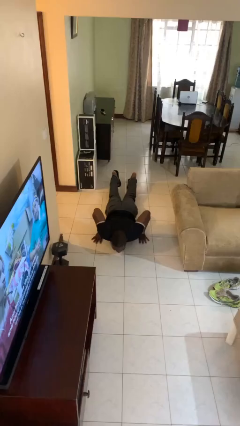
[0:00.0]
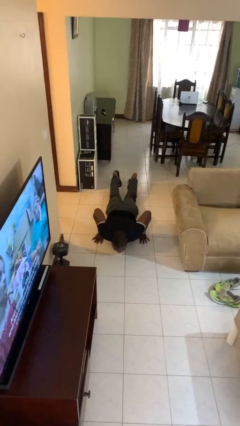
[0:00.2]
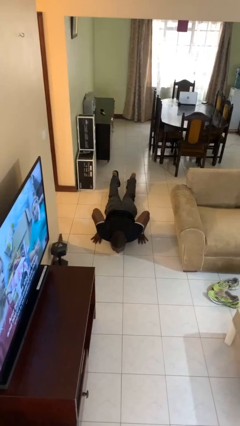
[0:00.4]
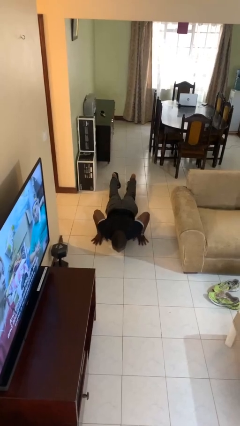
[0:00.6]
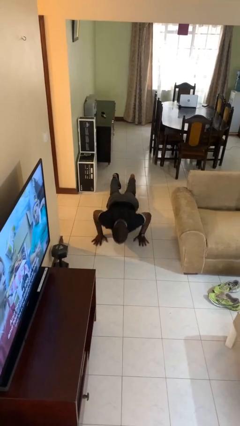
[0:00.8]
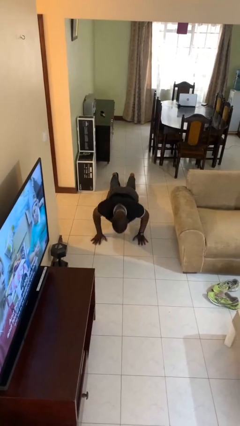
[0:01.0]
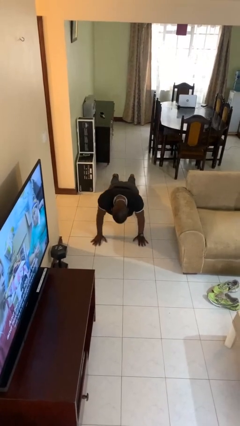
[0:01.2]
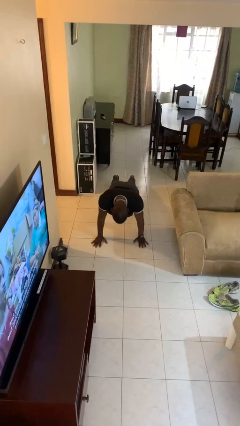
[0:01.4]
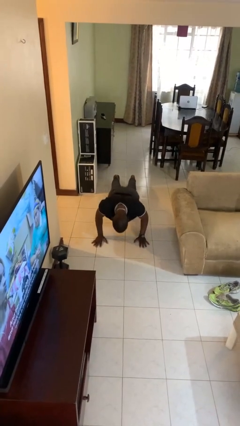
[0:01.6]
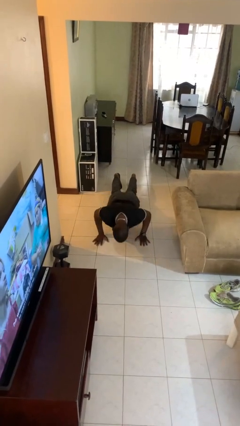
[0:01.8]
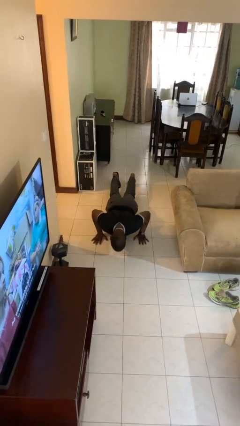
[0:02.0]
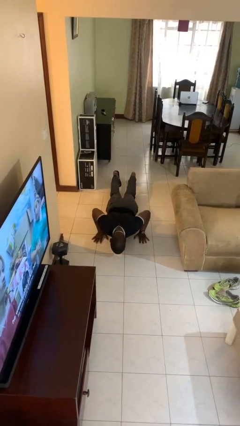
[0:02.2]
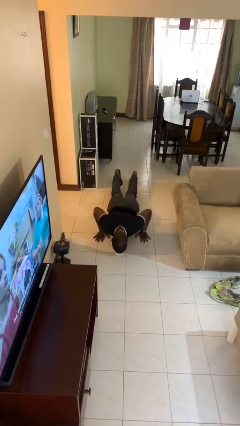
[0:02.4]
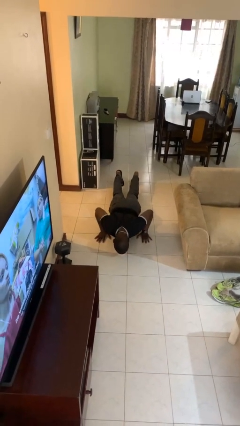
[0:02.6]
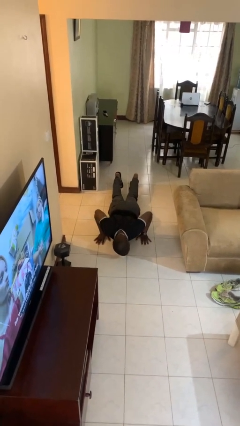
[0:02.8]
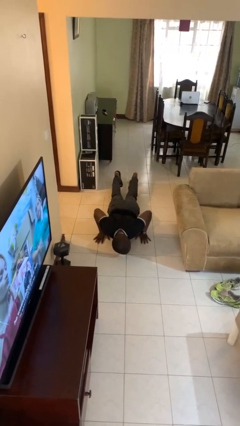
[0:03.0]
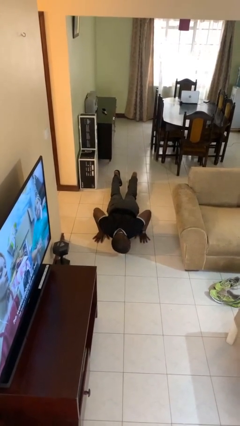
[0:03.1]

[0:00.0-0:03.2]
person exercises with pushup

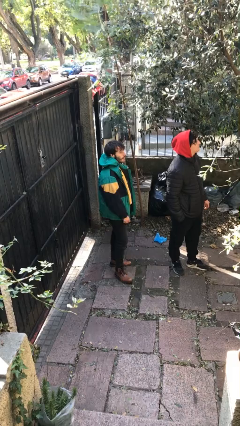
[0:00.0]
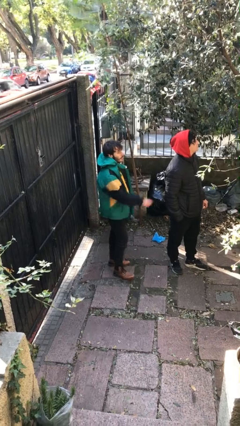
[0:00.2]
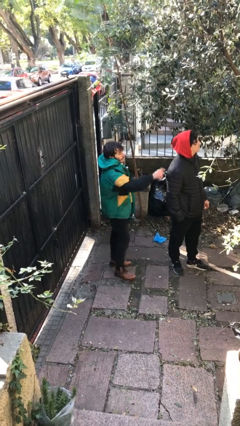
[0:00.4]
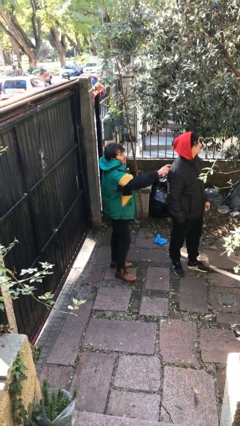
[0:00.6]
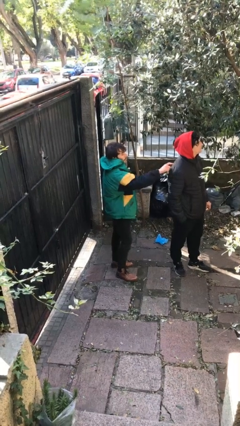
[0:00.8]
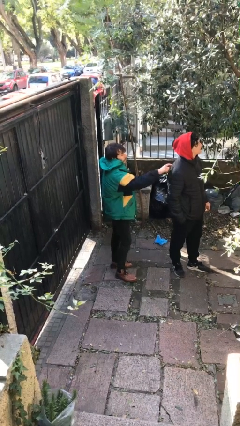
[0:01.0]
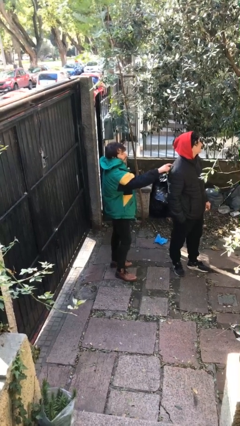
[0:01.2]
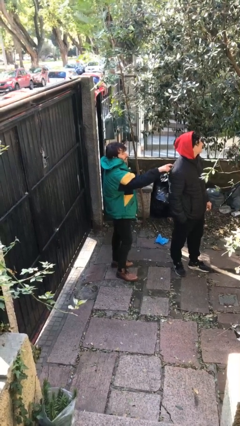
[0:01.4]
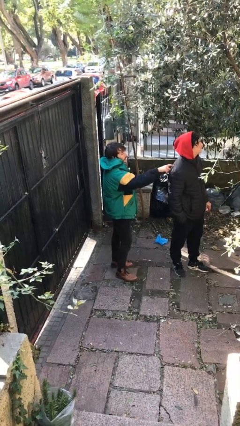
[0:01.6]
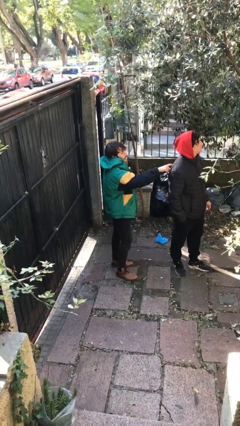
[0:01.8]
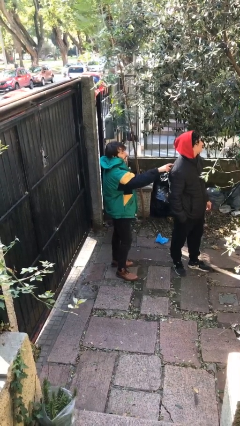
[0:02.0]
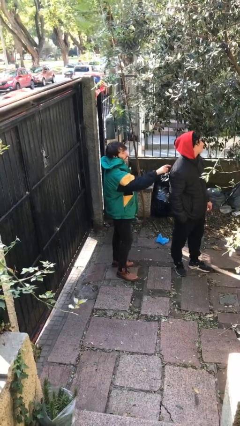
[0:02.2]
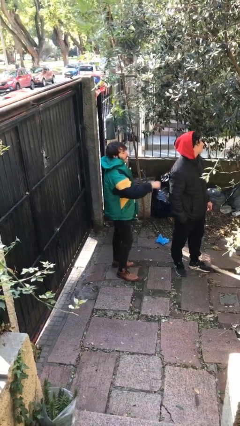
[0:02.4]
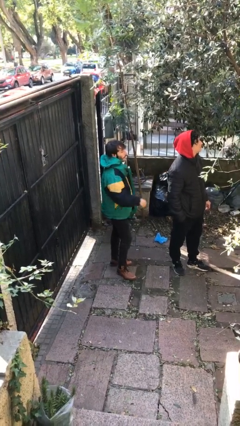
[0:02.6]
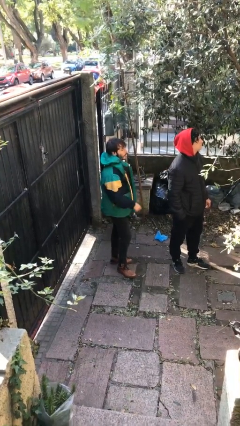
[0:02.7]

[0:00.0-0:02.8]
person touches back of person

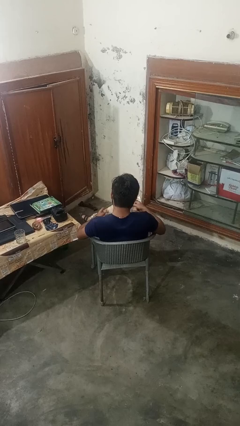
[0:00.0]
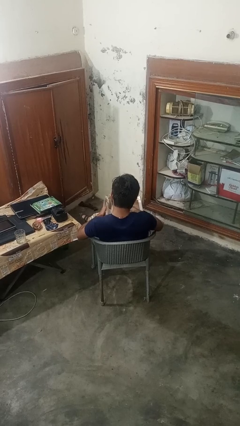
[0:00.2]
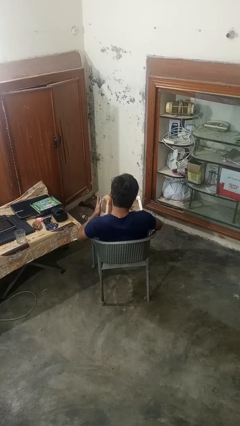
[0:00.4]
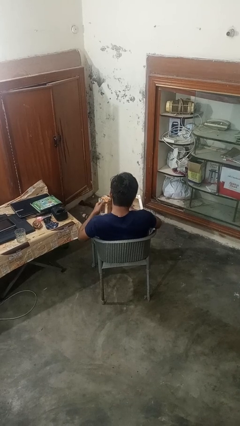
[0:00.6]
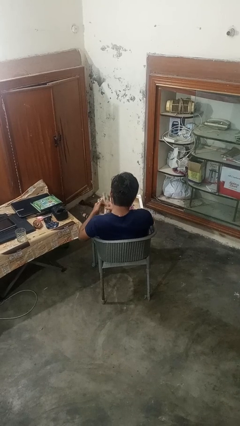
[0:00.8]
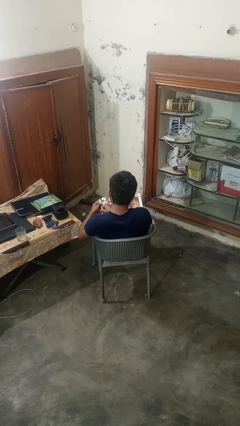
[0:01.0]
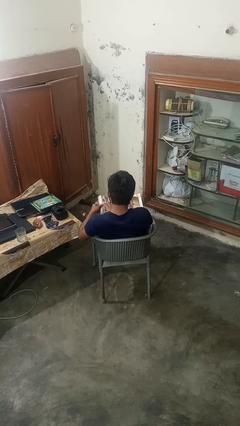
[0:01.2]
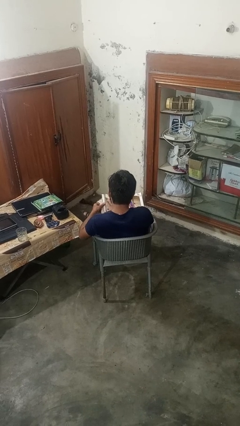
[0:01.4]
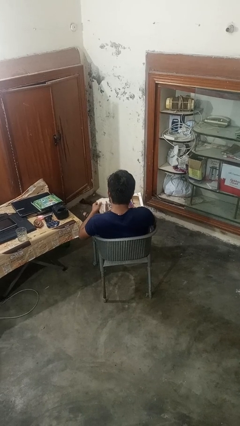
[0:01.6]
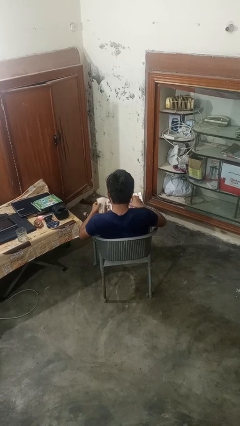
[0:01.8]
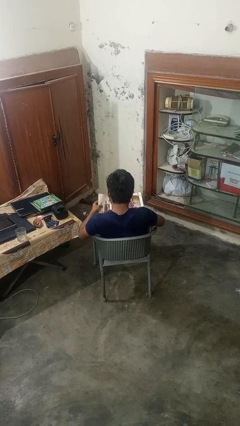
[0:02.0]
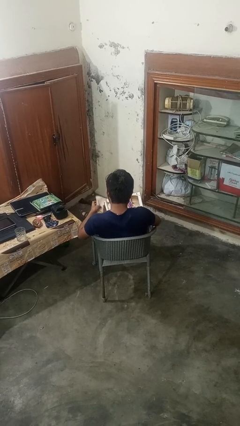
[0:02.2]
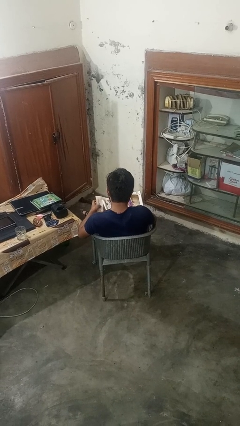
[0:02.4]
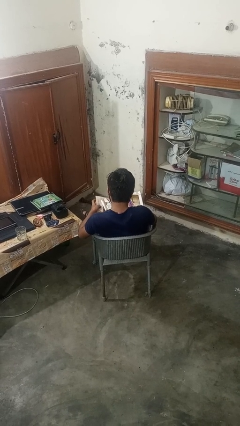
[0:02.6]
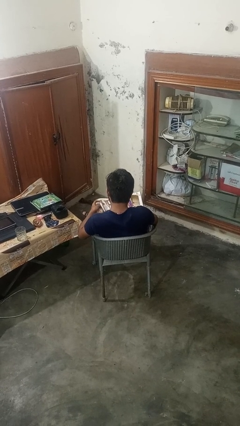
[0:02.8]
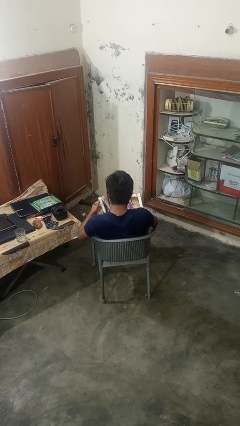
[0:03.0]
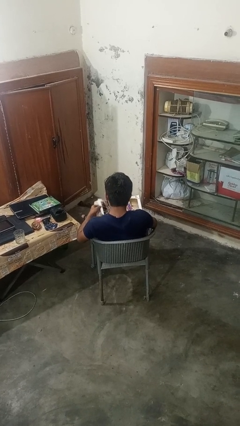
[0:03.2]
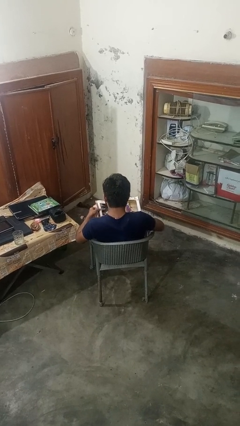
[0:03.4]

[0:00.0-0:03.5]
person reads magazine

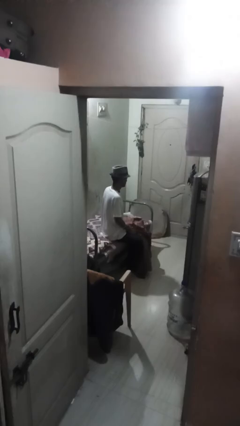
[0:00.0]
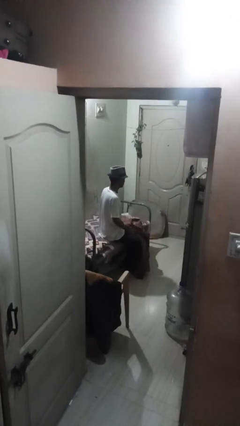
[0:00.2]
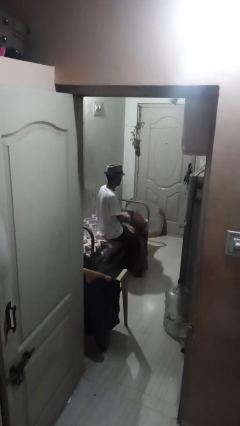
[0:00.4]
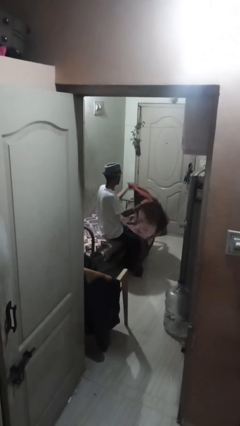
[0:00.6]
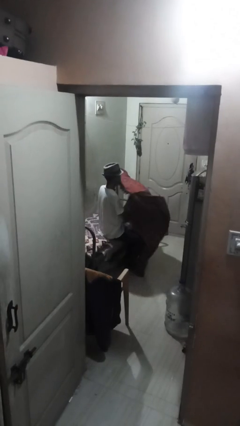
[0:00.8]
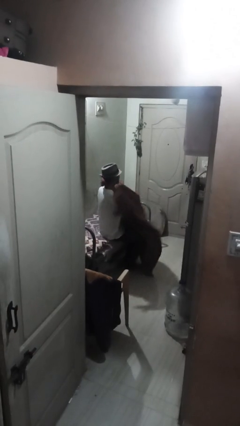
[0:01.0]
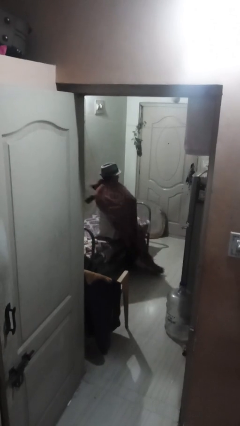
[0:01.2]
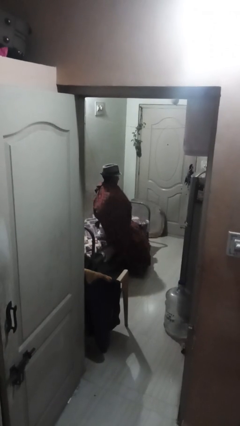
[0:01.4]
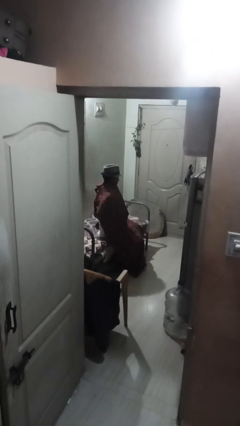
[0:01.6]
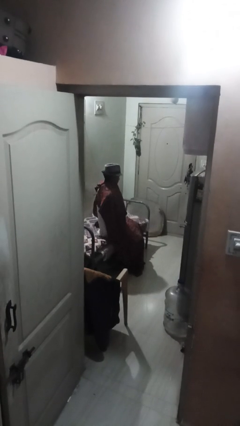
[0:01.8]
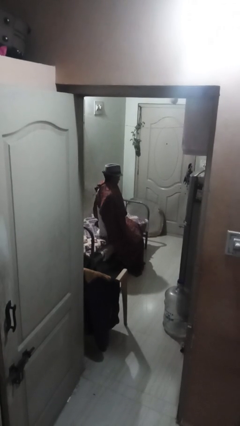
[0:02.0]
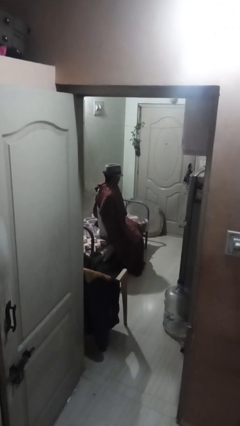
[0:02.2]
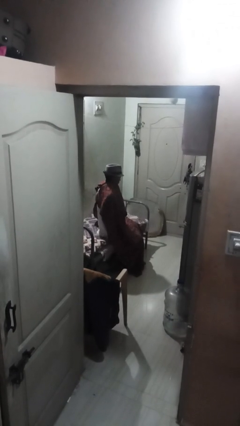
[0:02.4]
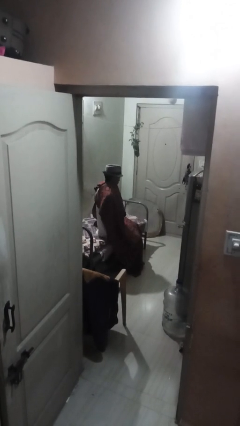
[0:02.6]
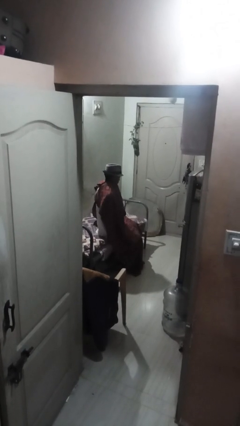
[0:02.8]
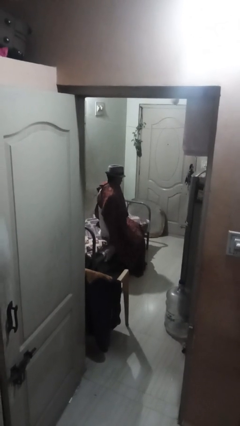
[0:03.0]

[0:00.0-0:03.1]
person covers with blanket

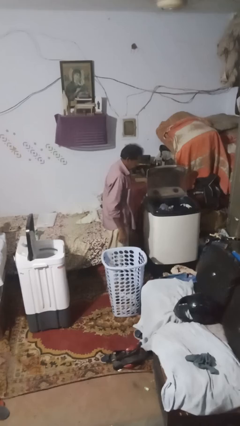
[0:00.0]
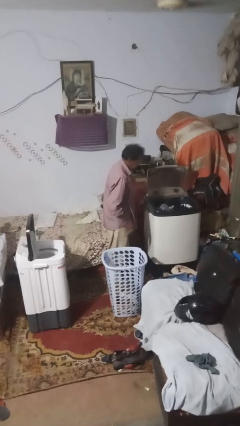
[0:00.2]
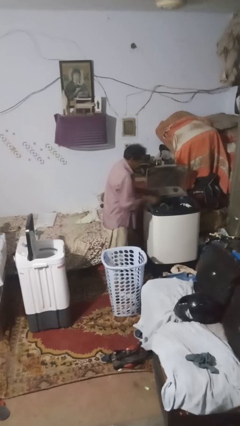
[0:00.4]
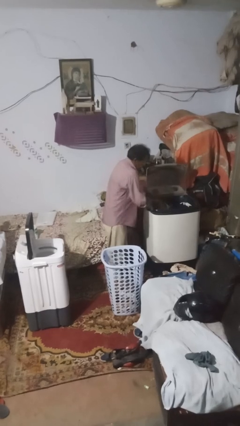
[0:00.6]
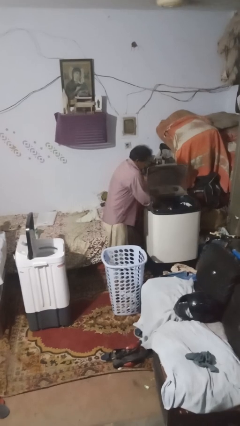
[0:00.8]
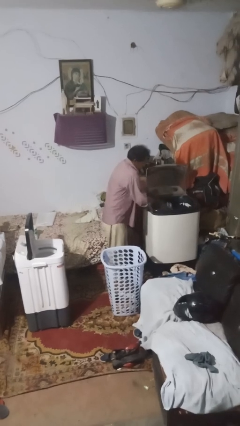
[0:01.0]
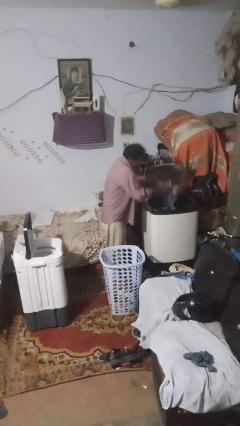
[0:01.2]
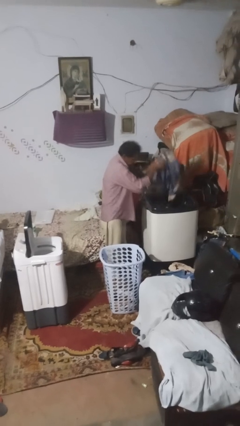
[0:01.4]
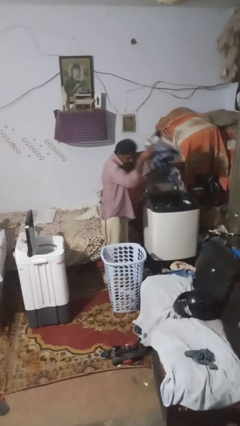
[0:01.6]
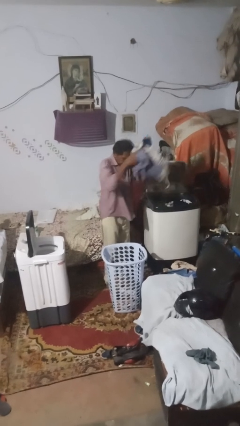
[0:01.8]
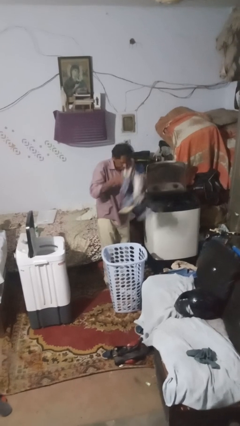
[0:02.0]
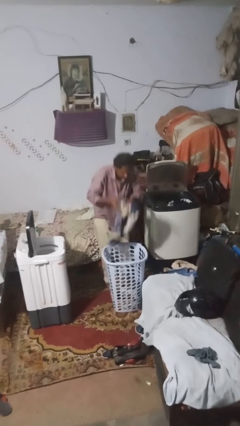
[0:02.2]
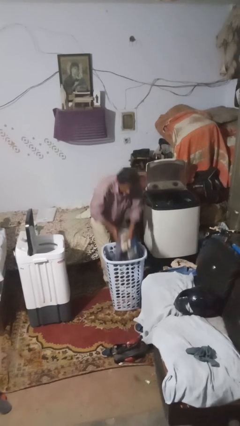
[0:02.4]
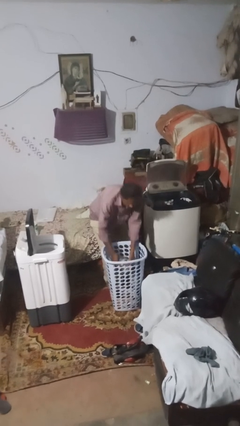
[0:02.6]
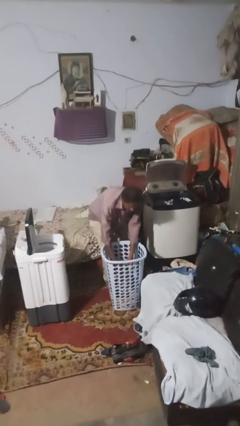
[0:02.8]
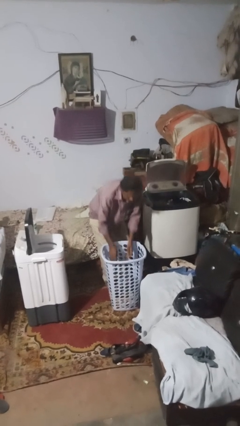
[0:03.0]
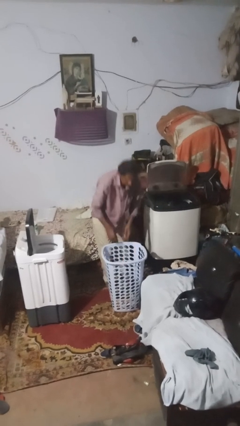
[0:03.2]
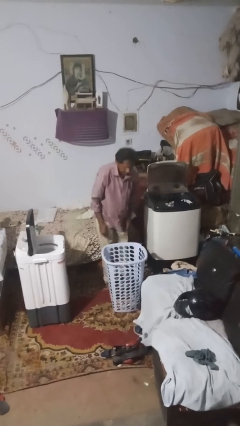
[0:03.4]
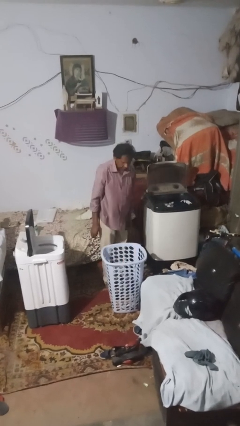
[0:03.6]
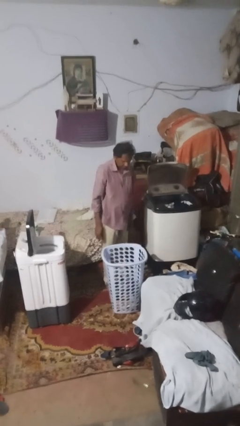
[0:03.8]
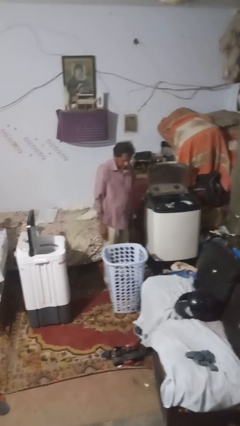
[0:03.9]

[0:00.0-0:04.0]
person unloads clotheswasher

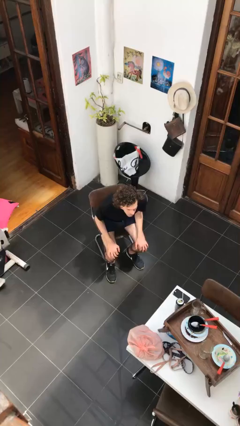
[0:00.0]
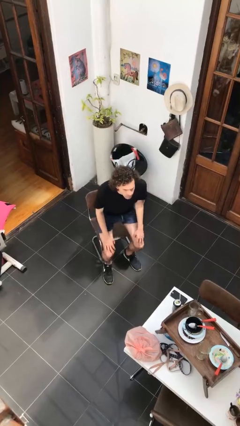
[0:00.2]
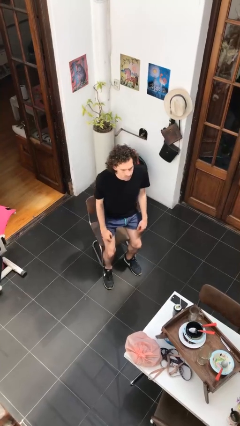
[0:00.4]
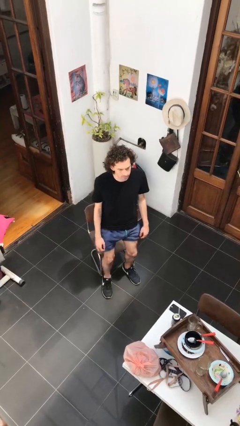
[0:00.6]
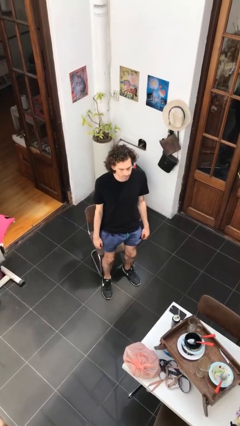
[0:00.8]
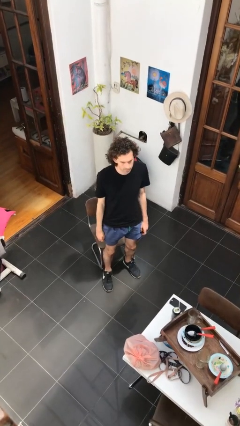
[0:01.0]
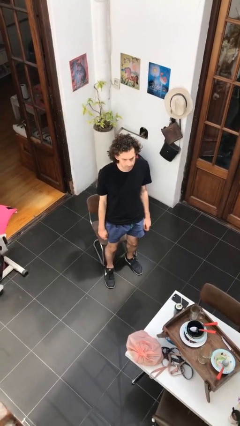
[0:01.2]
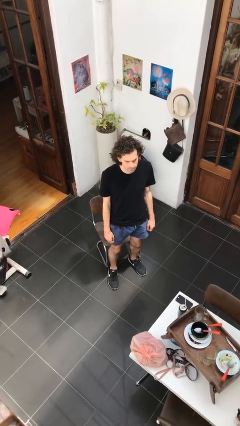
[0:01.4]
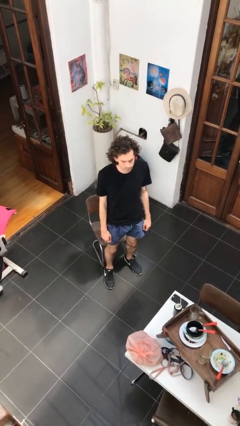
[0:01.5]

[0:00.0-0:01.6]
person stands up
